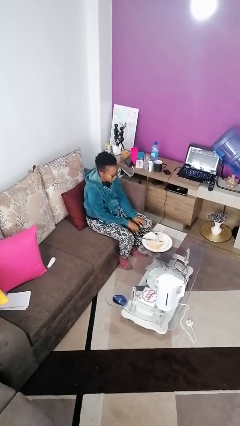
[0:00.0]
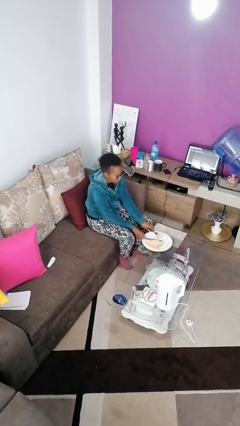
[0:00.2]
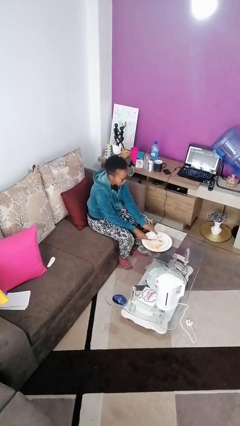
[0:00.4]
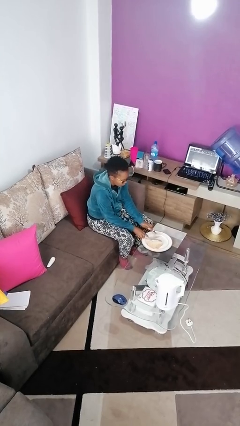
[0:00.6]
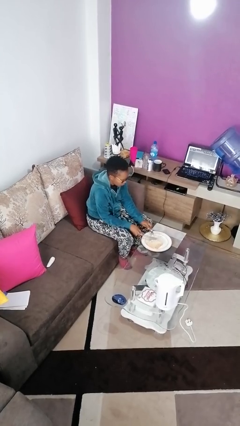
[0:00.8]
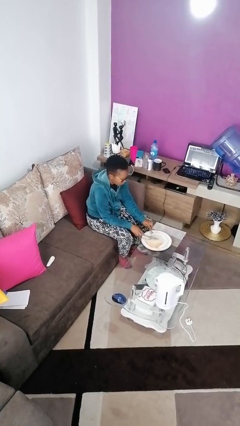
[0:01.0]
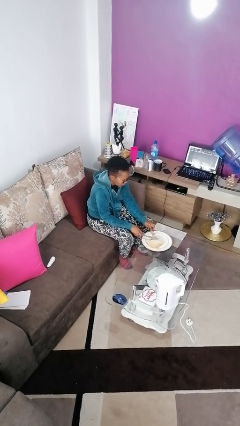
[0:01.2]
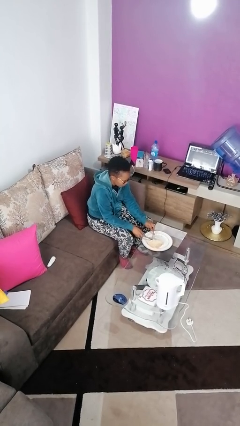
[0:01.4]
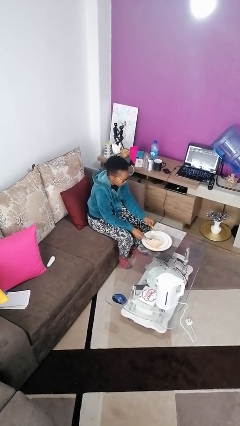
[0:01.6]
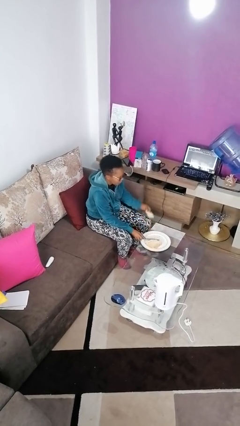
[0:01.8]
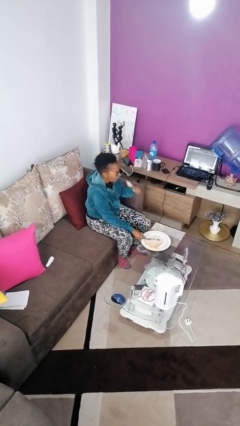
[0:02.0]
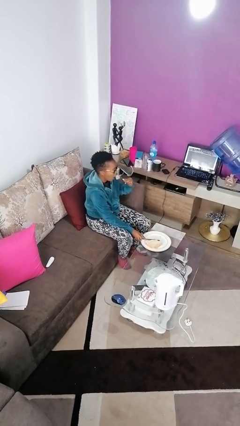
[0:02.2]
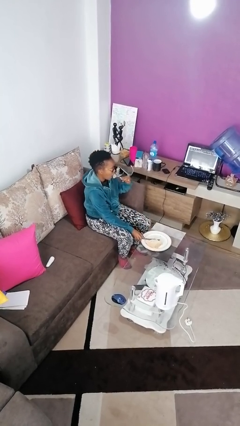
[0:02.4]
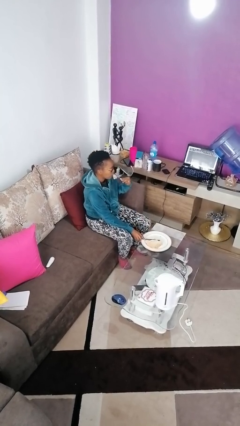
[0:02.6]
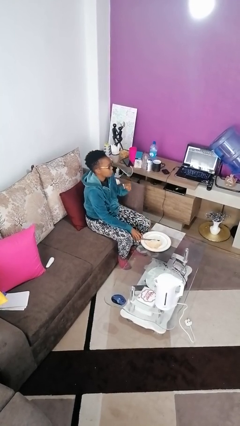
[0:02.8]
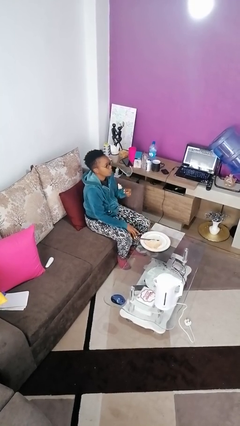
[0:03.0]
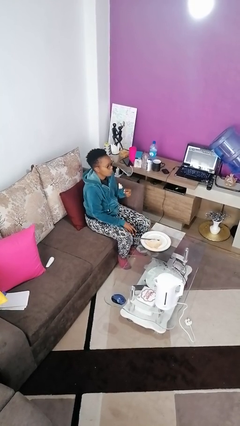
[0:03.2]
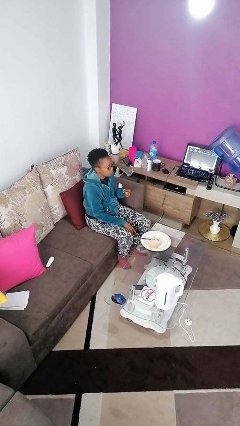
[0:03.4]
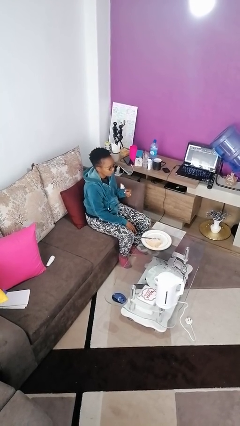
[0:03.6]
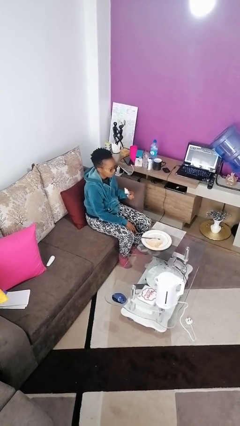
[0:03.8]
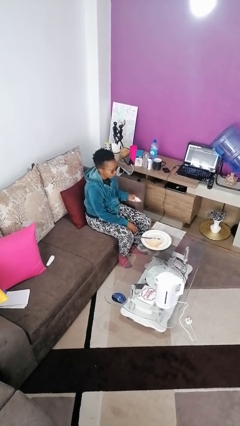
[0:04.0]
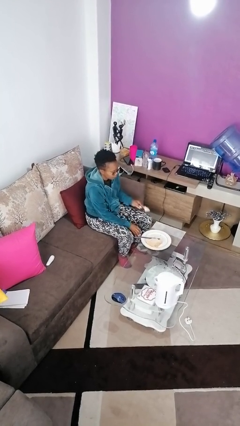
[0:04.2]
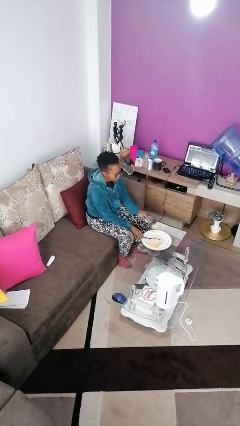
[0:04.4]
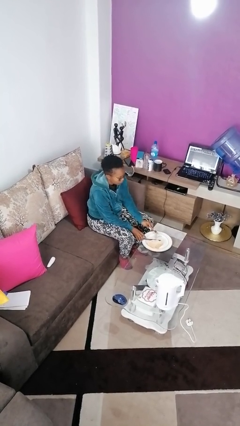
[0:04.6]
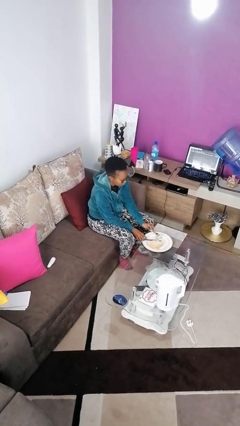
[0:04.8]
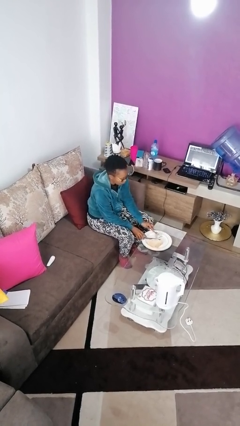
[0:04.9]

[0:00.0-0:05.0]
person eats with utensil

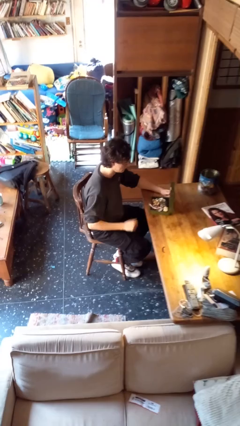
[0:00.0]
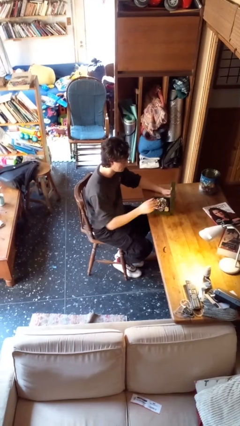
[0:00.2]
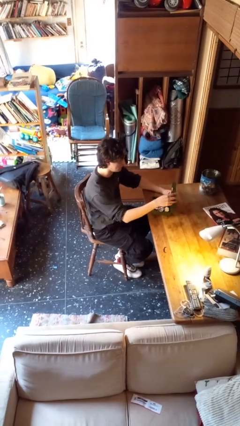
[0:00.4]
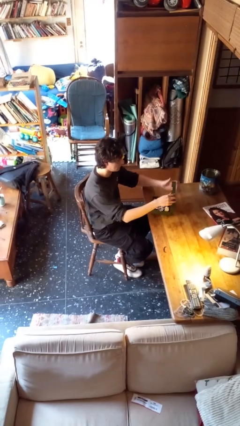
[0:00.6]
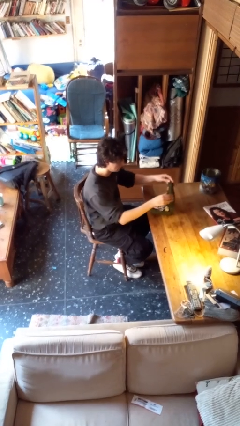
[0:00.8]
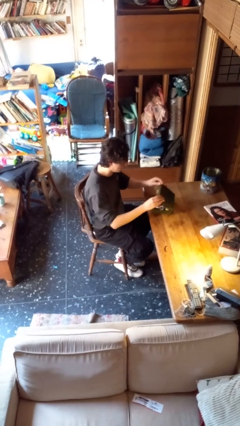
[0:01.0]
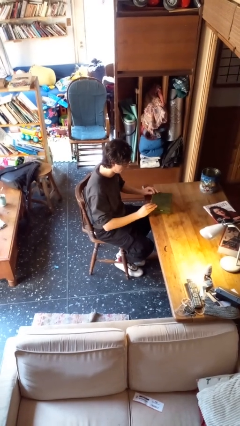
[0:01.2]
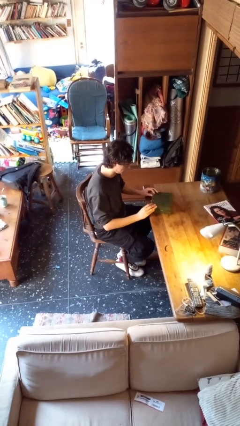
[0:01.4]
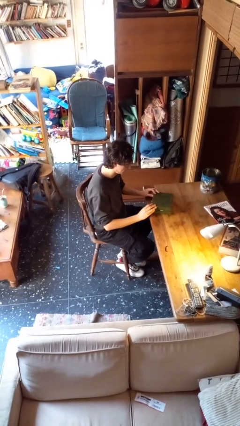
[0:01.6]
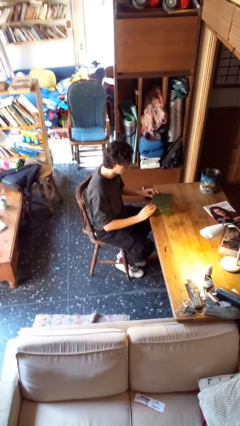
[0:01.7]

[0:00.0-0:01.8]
person closes jewelry box

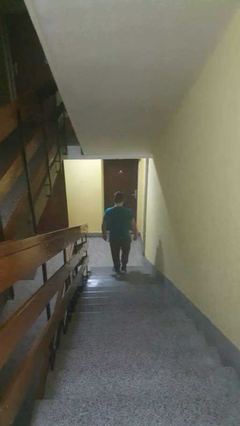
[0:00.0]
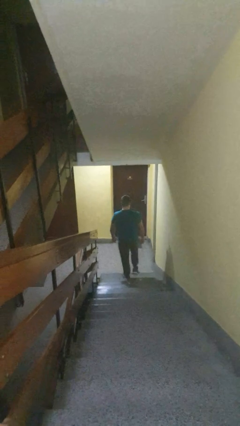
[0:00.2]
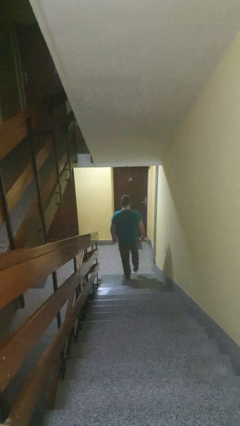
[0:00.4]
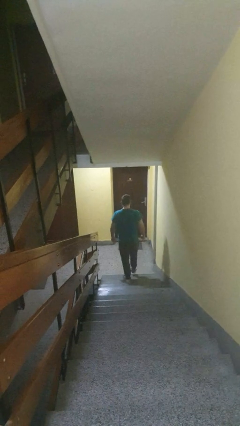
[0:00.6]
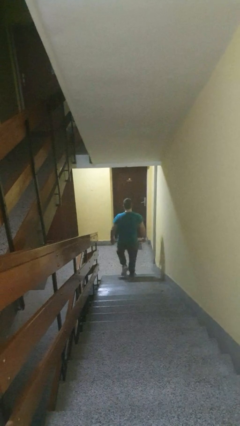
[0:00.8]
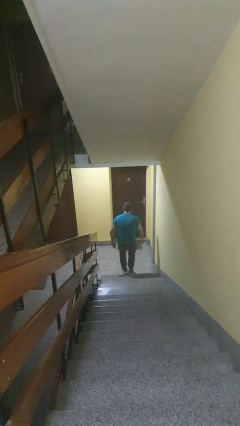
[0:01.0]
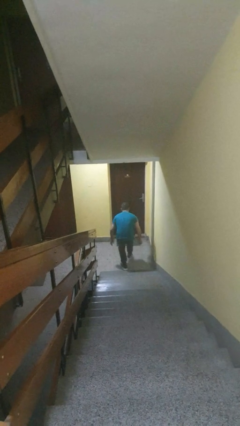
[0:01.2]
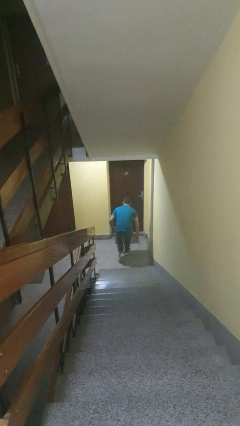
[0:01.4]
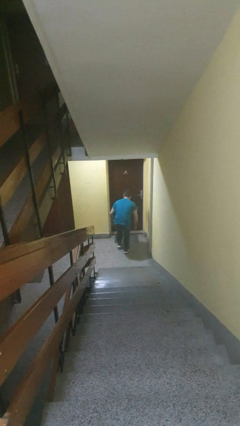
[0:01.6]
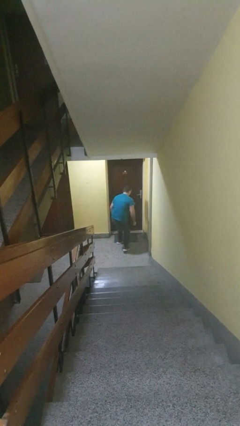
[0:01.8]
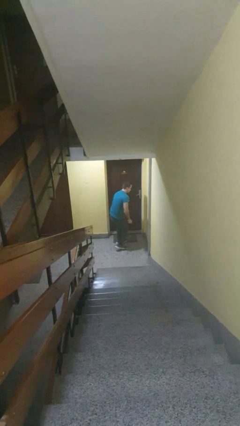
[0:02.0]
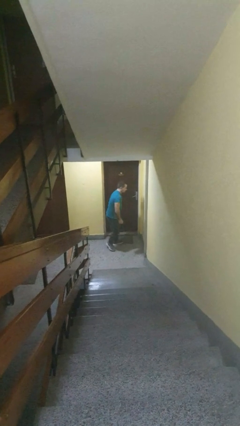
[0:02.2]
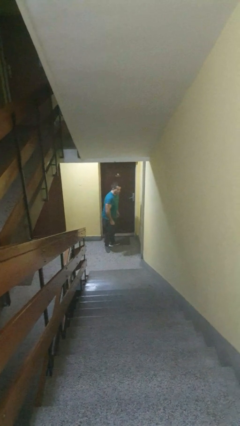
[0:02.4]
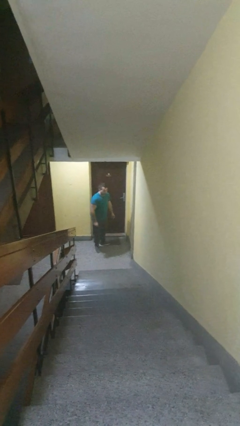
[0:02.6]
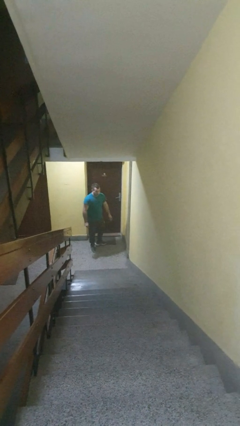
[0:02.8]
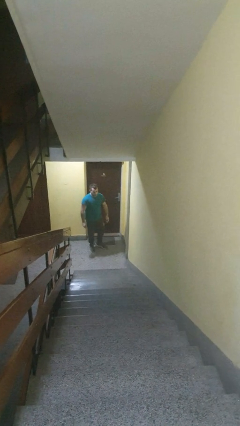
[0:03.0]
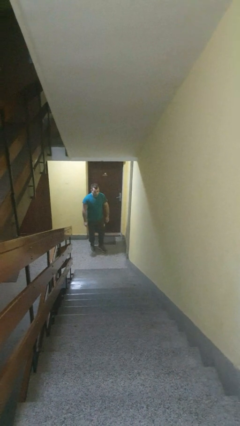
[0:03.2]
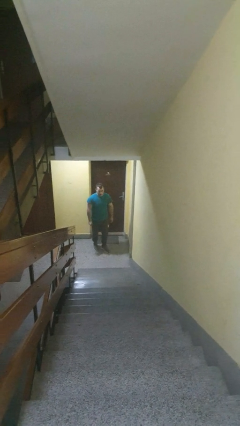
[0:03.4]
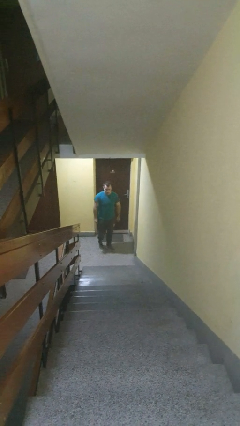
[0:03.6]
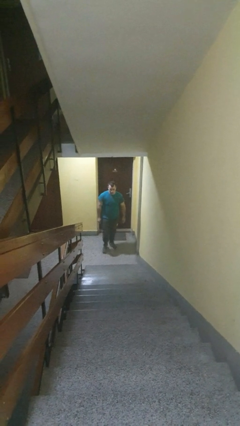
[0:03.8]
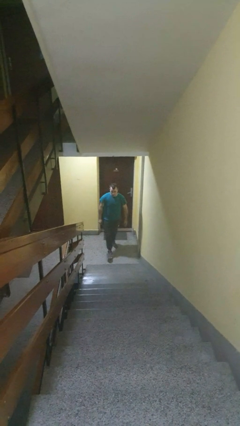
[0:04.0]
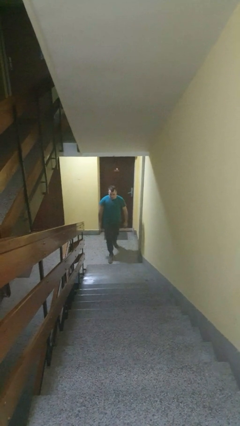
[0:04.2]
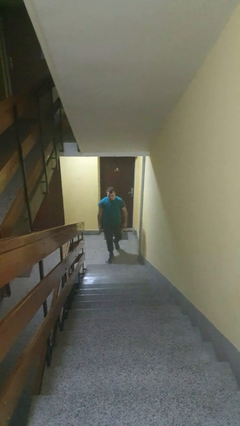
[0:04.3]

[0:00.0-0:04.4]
person trips on stair

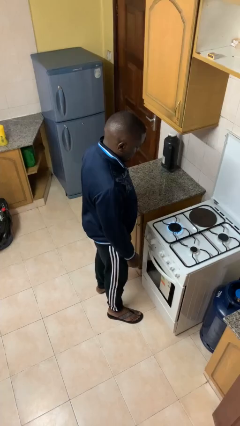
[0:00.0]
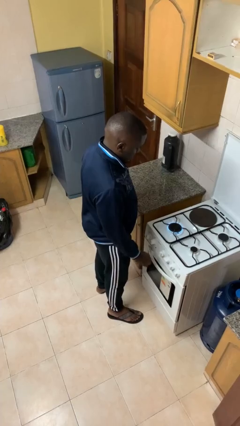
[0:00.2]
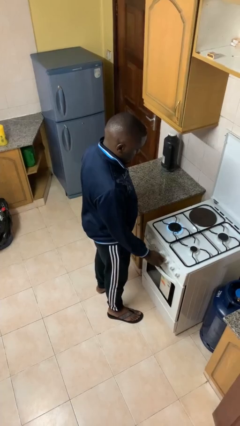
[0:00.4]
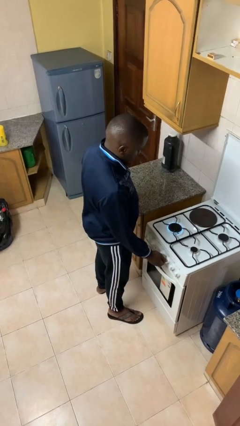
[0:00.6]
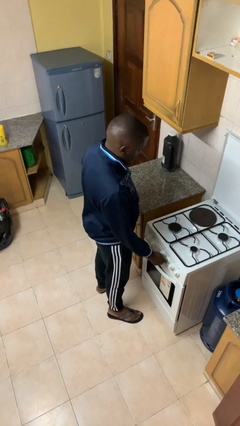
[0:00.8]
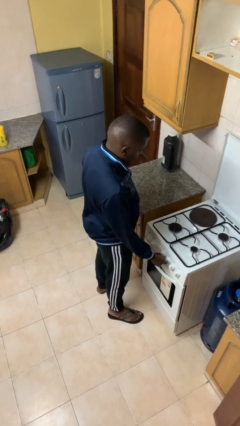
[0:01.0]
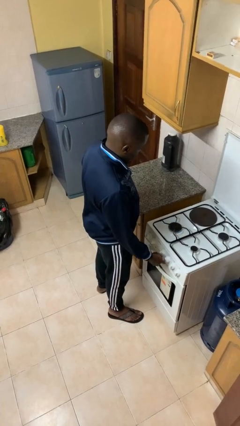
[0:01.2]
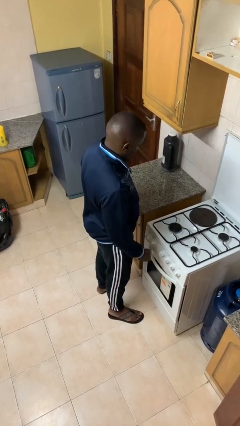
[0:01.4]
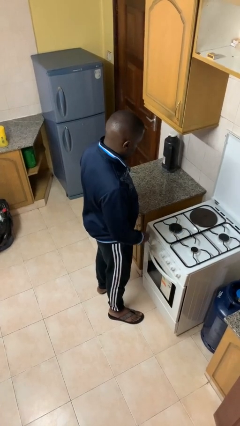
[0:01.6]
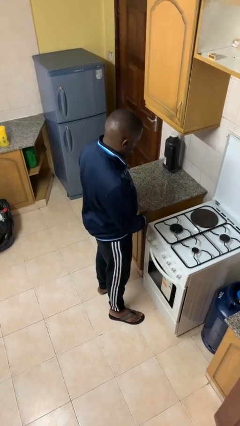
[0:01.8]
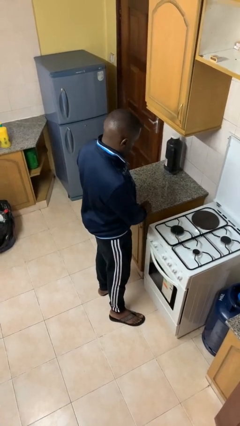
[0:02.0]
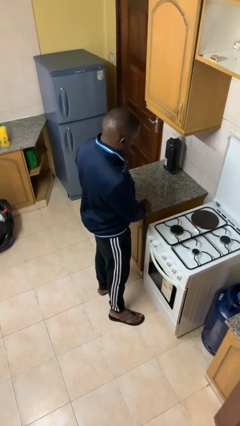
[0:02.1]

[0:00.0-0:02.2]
person turns off stovetop

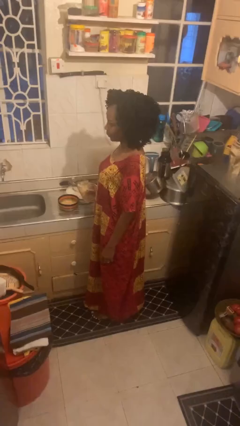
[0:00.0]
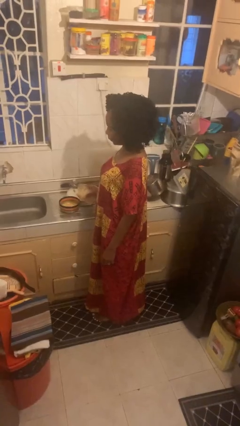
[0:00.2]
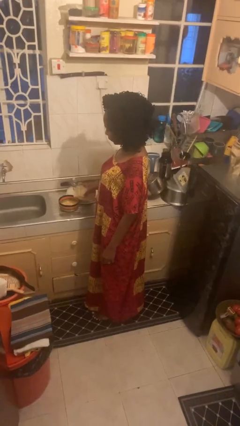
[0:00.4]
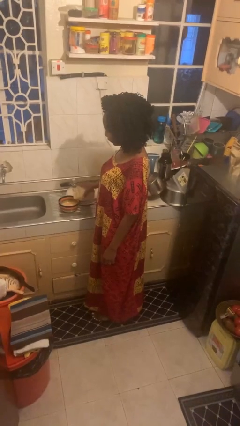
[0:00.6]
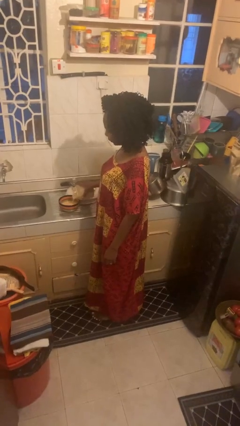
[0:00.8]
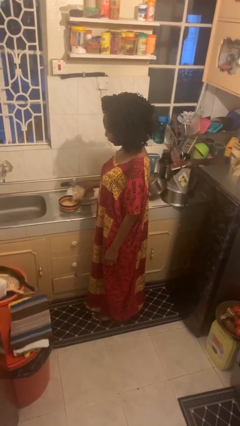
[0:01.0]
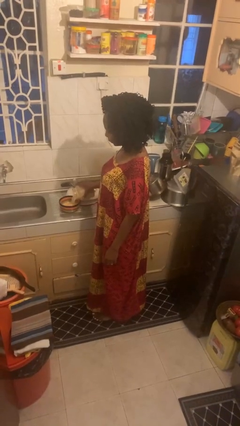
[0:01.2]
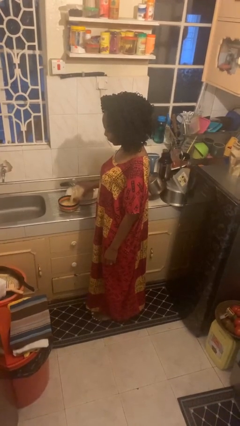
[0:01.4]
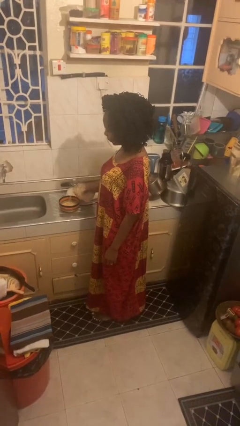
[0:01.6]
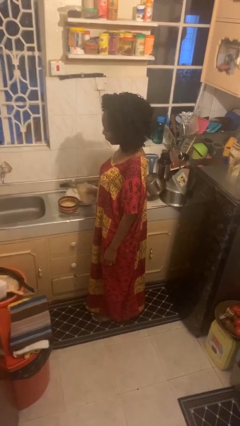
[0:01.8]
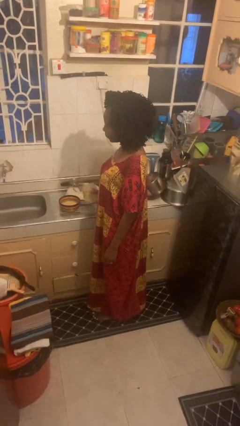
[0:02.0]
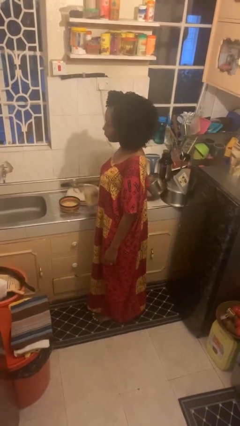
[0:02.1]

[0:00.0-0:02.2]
person pours into bowl

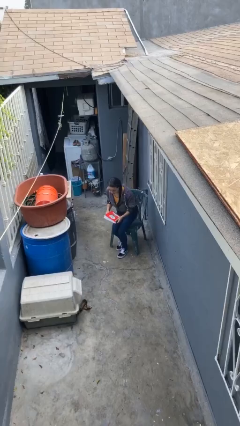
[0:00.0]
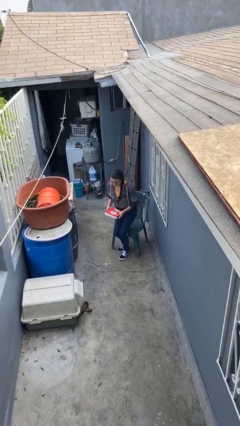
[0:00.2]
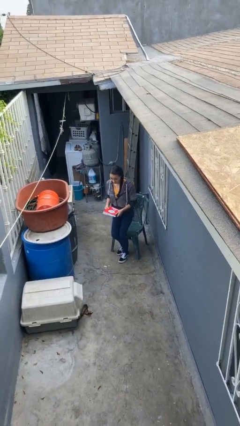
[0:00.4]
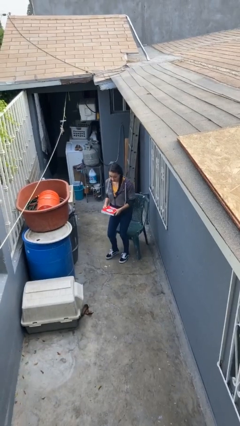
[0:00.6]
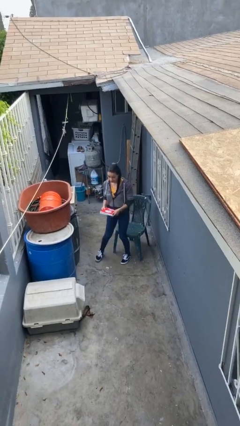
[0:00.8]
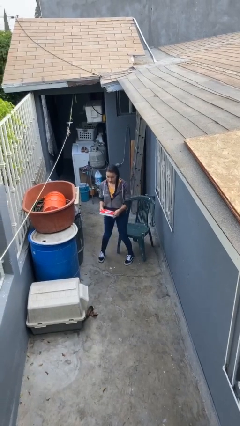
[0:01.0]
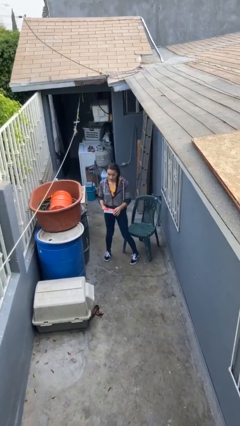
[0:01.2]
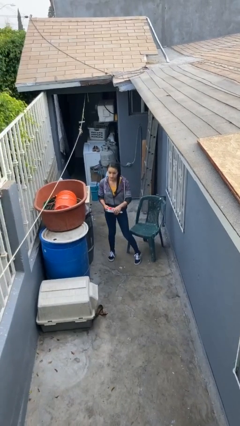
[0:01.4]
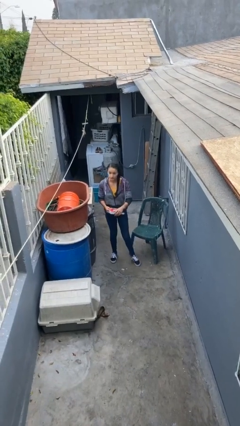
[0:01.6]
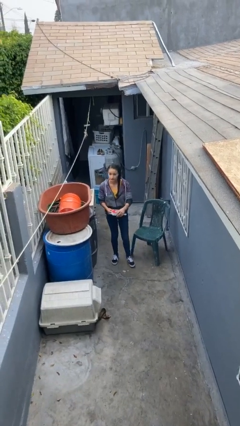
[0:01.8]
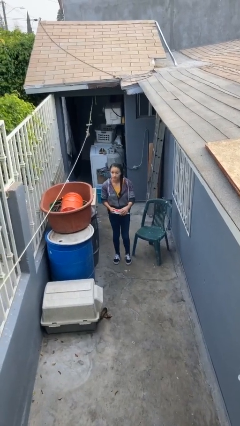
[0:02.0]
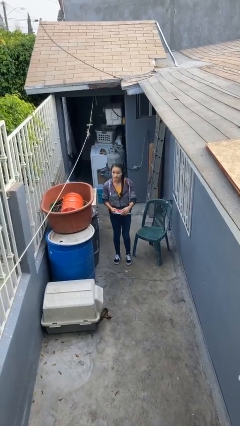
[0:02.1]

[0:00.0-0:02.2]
person stands up
